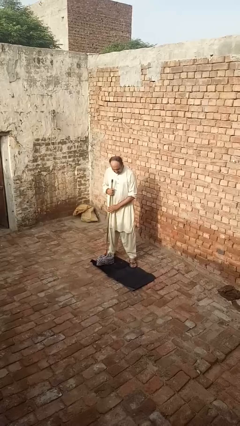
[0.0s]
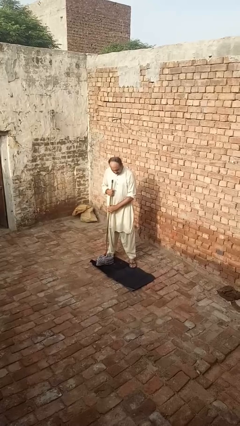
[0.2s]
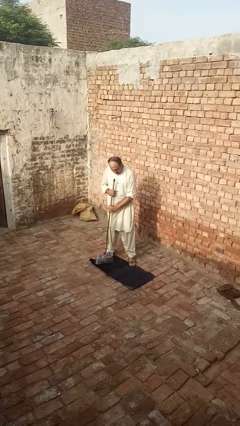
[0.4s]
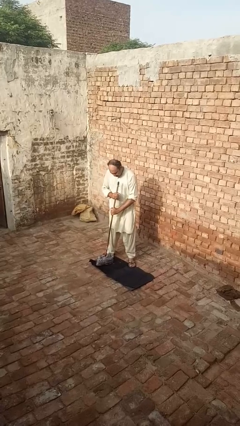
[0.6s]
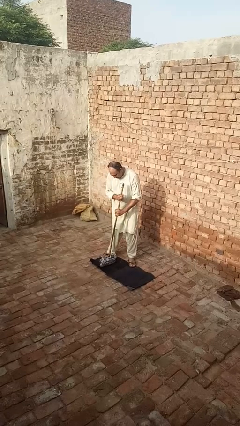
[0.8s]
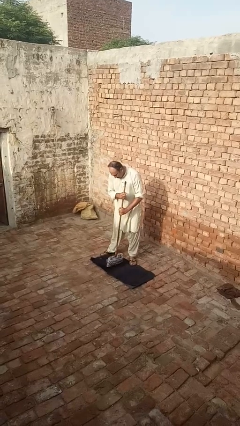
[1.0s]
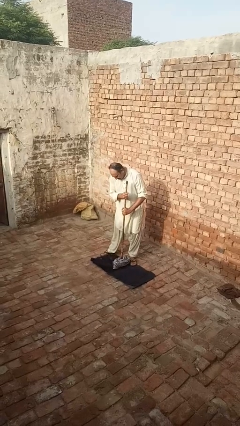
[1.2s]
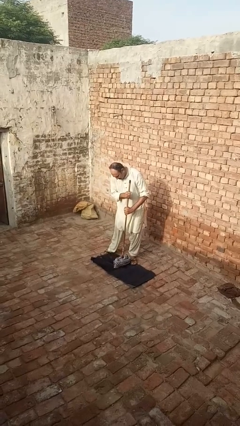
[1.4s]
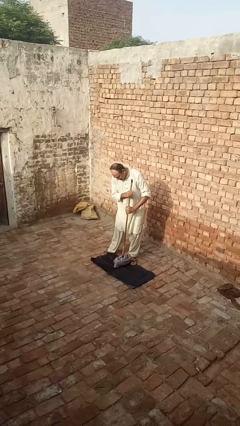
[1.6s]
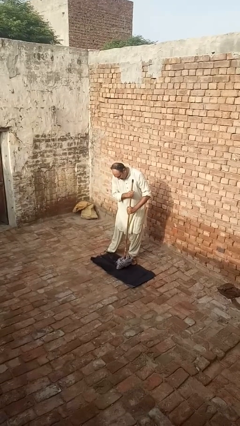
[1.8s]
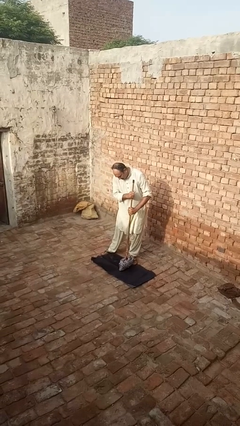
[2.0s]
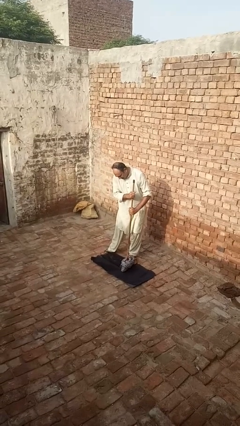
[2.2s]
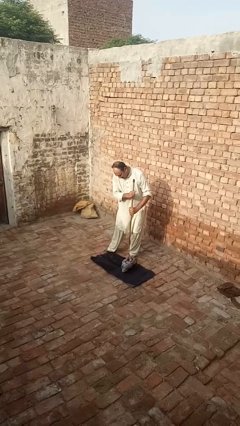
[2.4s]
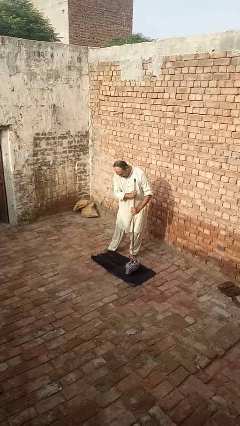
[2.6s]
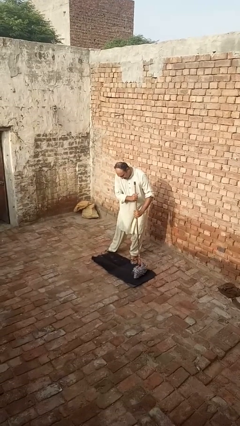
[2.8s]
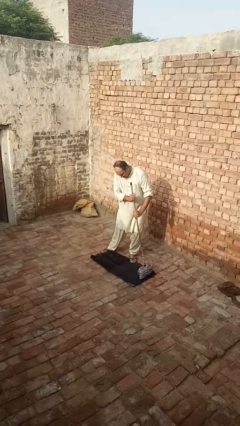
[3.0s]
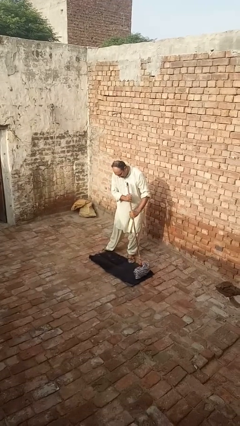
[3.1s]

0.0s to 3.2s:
person vacuums carpet

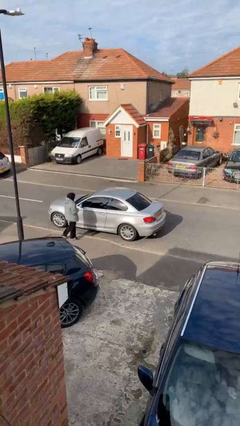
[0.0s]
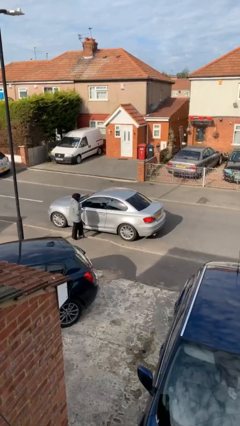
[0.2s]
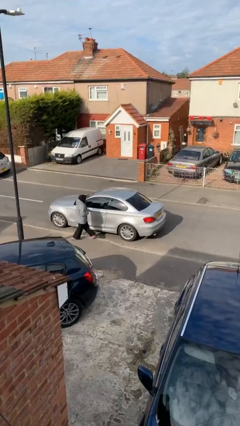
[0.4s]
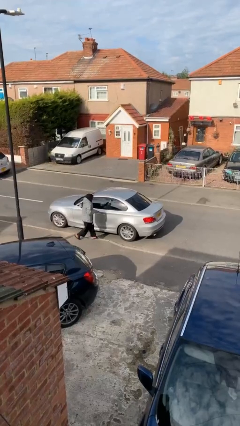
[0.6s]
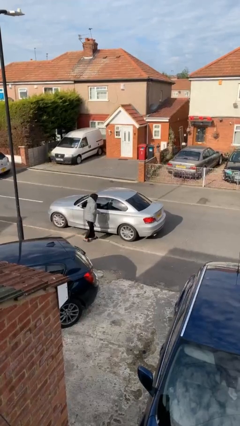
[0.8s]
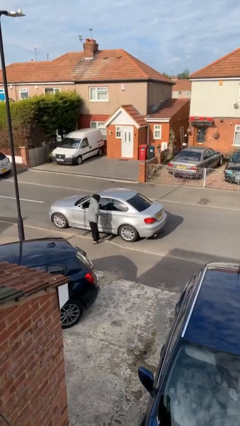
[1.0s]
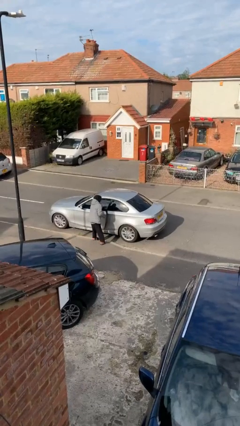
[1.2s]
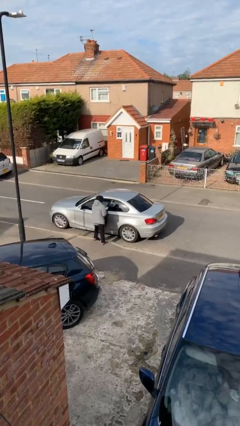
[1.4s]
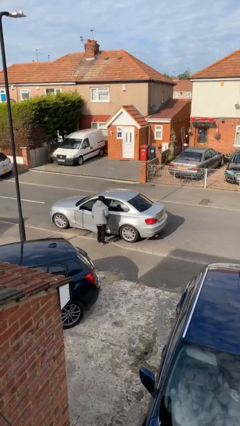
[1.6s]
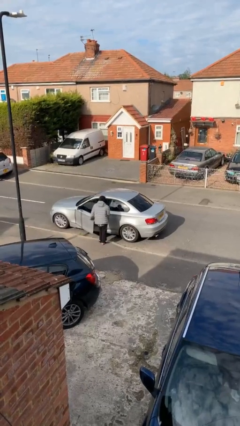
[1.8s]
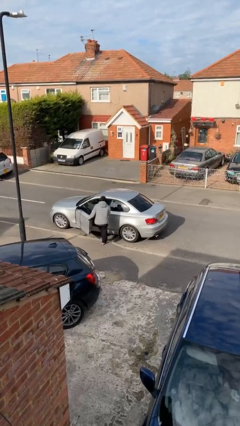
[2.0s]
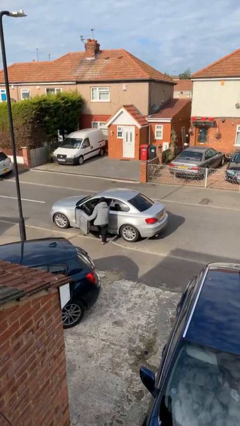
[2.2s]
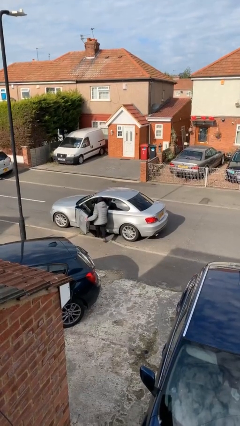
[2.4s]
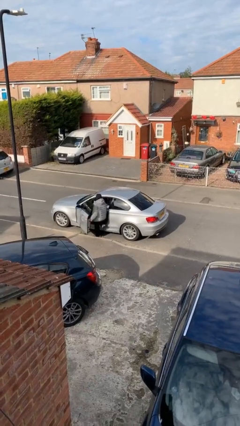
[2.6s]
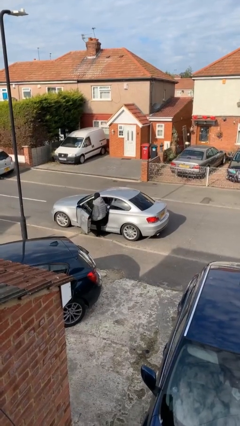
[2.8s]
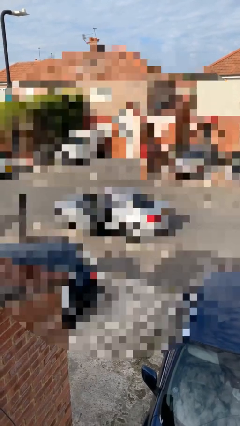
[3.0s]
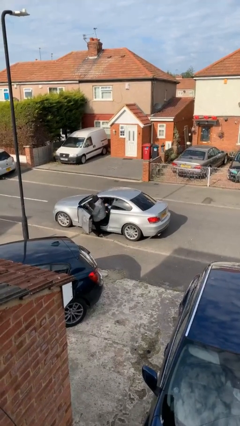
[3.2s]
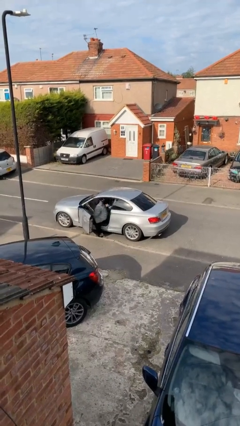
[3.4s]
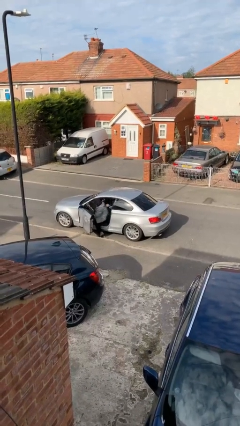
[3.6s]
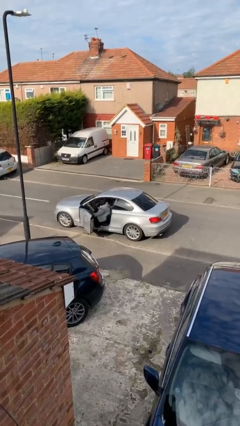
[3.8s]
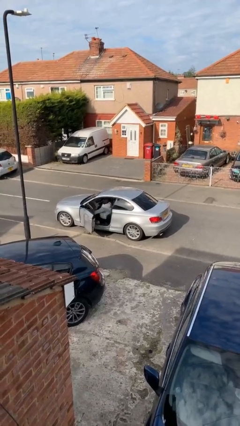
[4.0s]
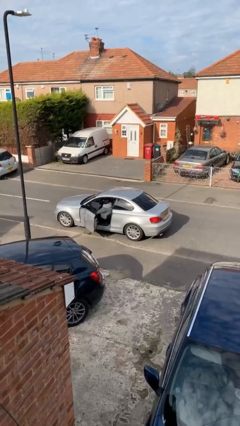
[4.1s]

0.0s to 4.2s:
car picks up person

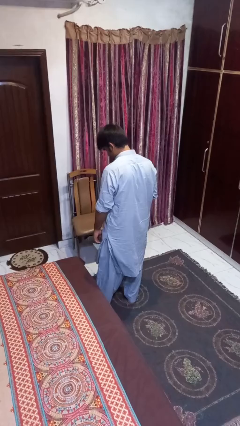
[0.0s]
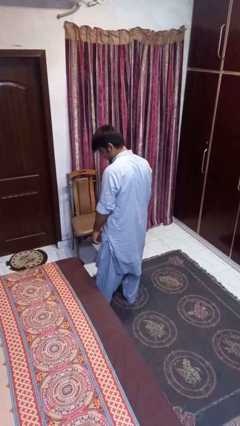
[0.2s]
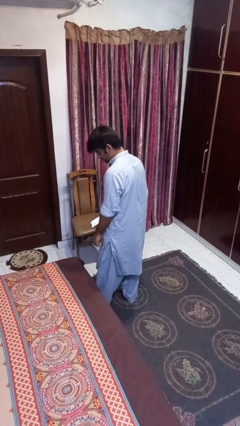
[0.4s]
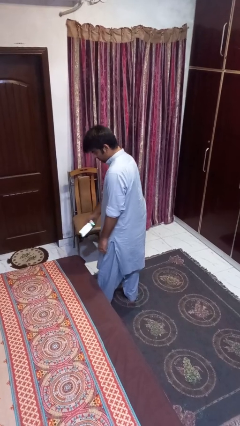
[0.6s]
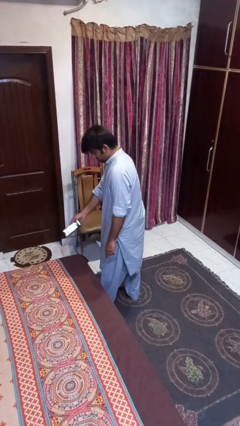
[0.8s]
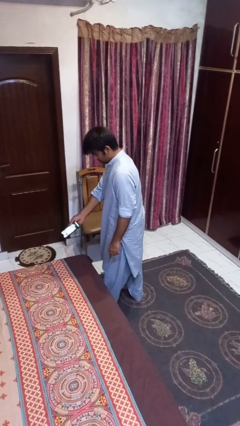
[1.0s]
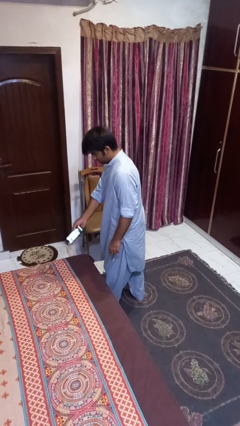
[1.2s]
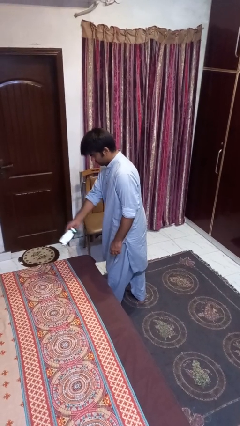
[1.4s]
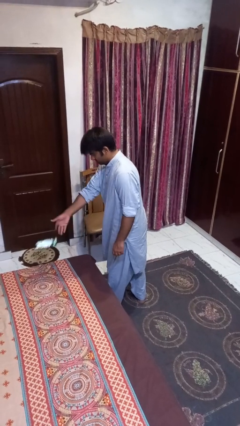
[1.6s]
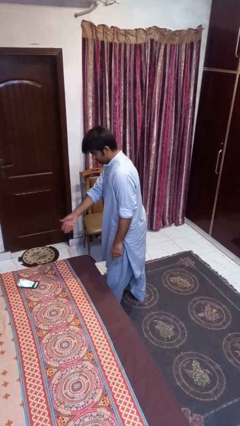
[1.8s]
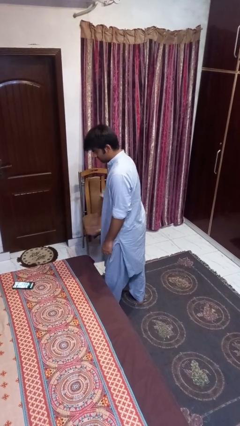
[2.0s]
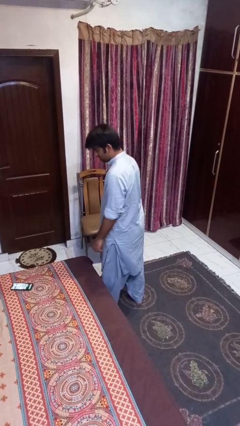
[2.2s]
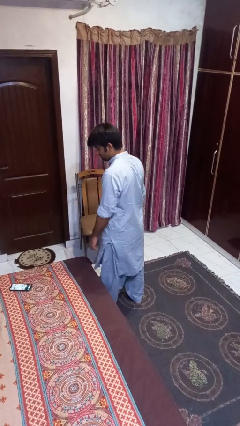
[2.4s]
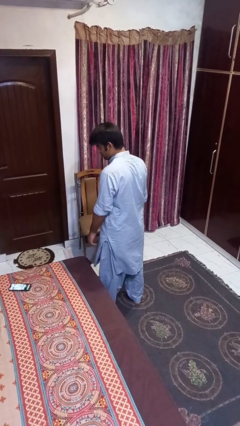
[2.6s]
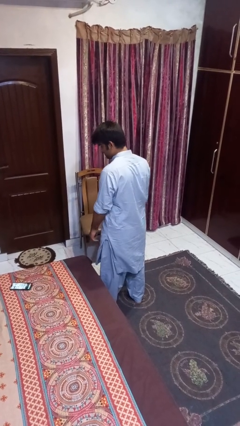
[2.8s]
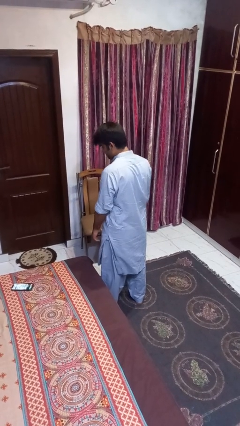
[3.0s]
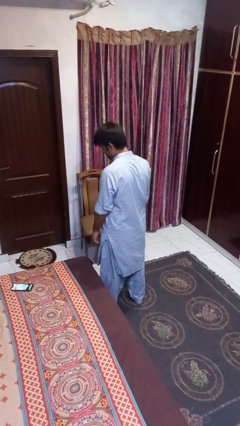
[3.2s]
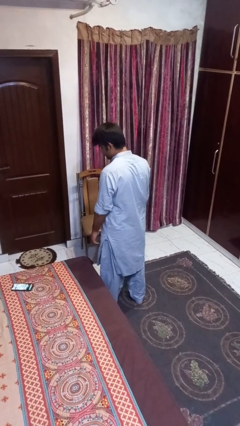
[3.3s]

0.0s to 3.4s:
person throws object on bed

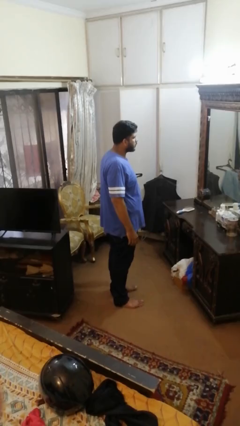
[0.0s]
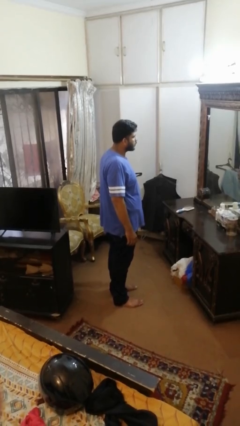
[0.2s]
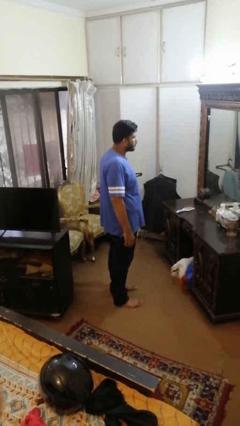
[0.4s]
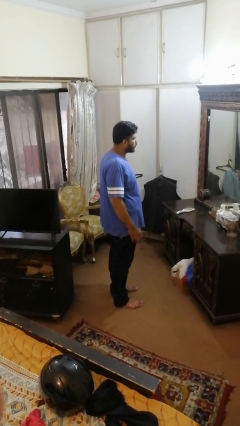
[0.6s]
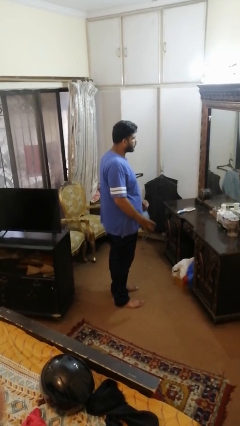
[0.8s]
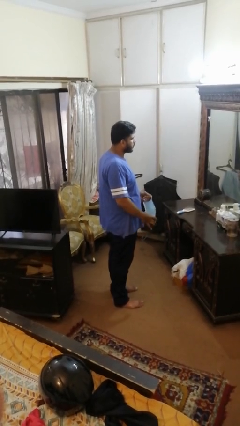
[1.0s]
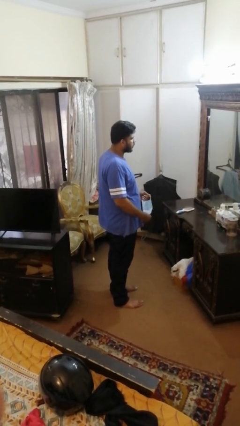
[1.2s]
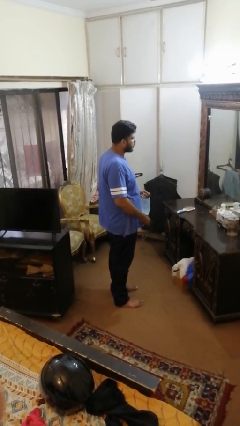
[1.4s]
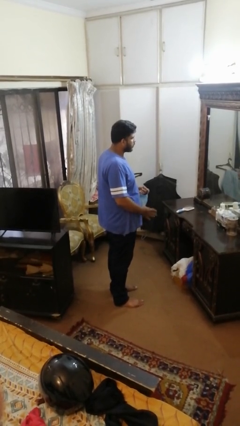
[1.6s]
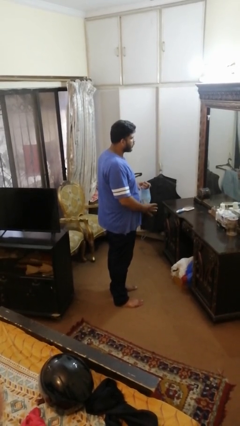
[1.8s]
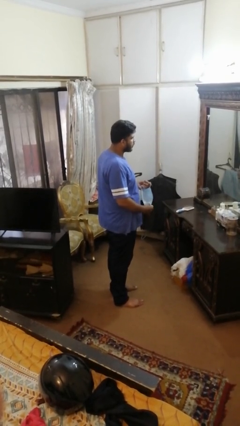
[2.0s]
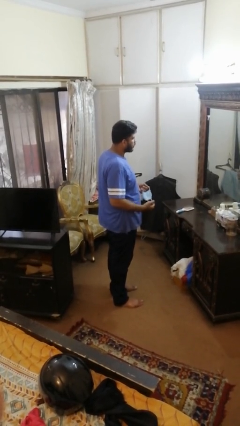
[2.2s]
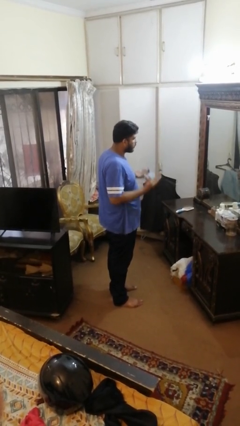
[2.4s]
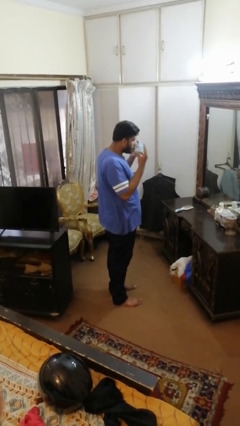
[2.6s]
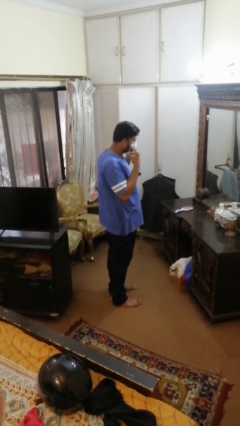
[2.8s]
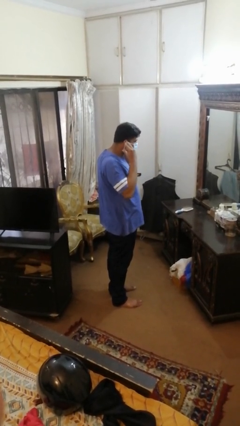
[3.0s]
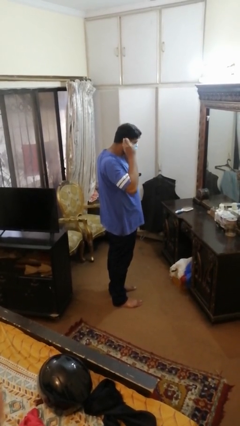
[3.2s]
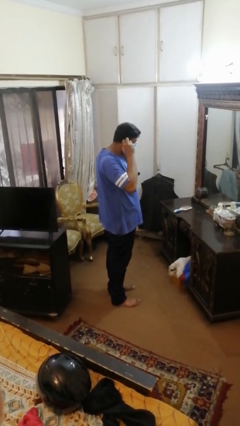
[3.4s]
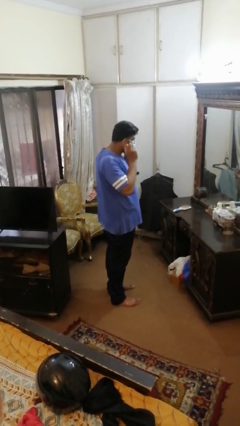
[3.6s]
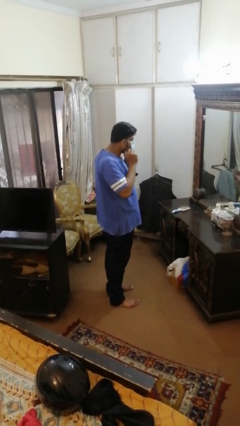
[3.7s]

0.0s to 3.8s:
person puts on facemask

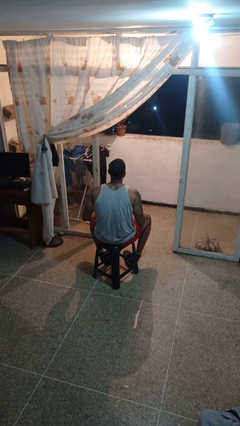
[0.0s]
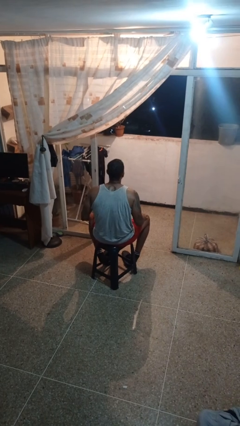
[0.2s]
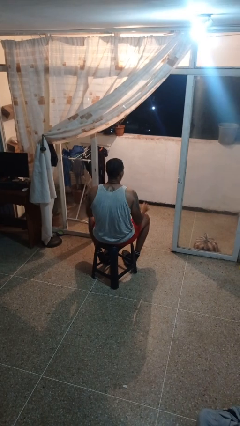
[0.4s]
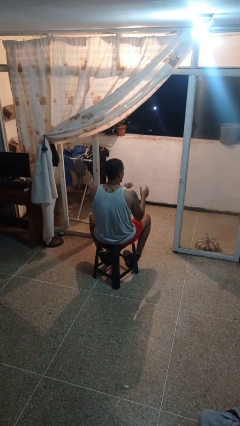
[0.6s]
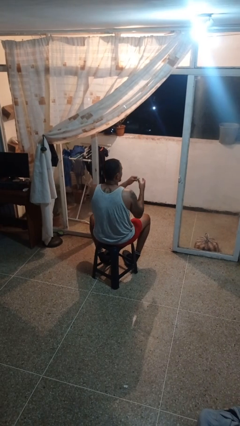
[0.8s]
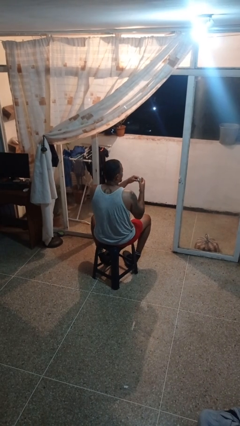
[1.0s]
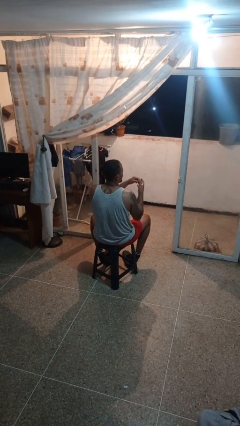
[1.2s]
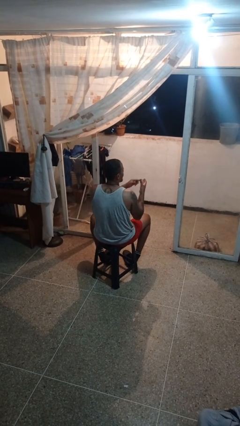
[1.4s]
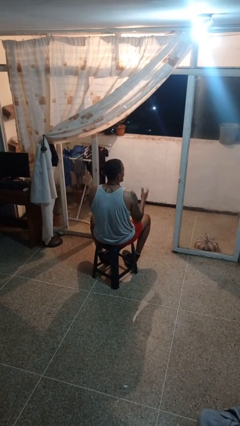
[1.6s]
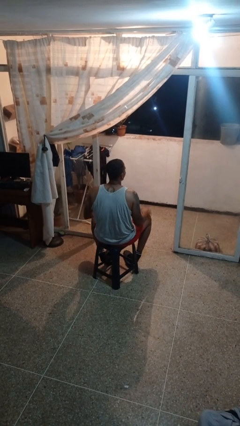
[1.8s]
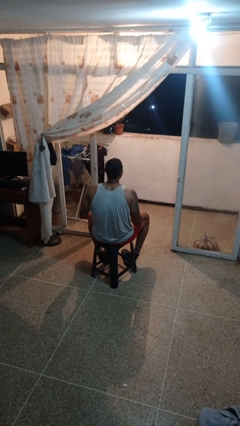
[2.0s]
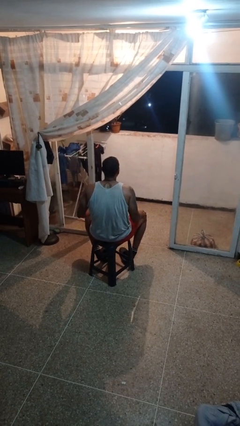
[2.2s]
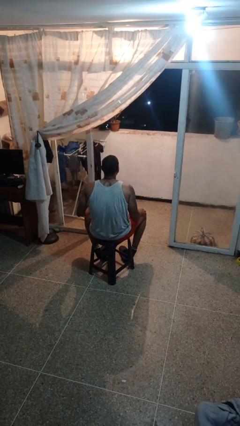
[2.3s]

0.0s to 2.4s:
person puts on ring

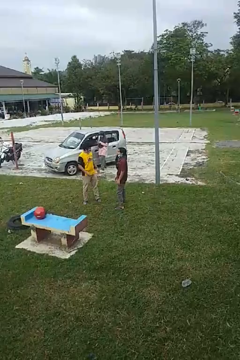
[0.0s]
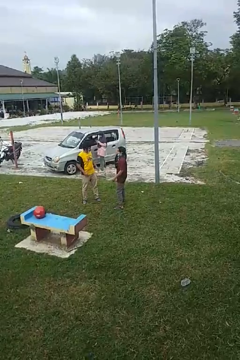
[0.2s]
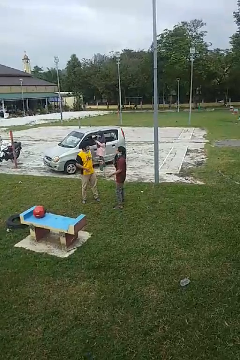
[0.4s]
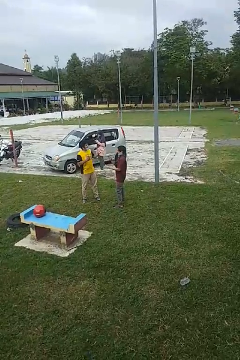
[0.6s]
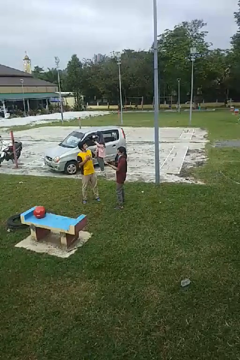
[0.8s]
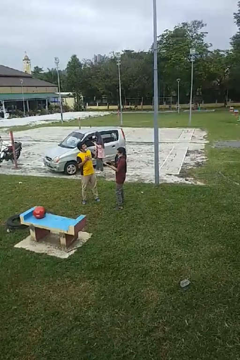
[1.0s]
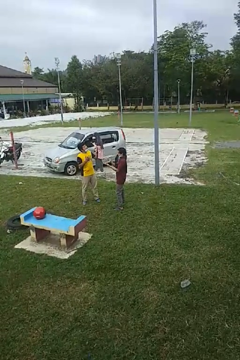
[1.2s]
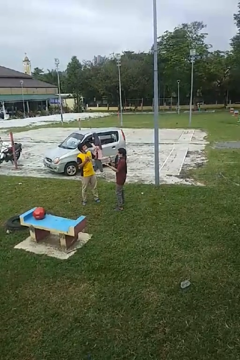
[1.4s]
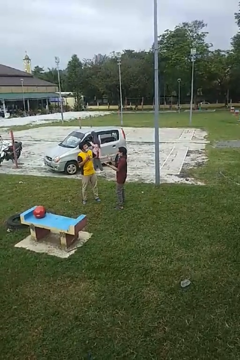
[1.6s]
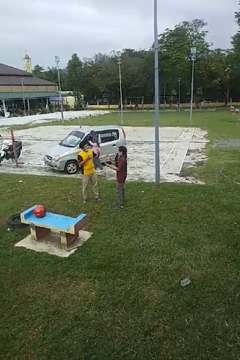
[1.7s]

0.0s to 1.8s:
person talks to person
